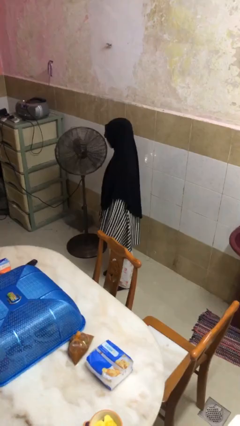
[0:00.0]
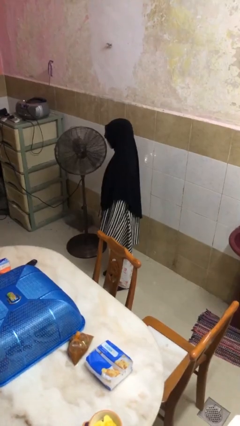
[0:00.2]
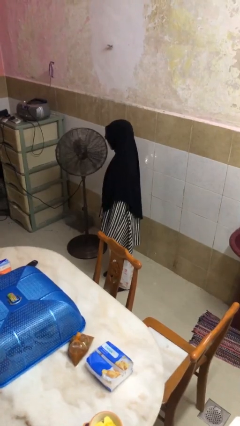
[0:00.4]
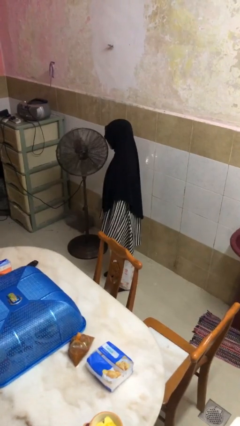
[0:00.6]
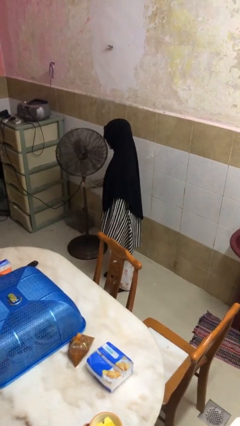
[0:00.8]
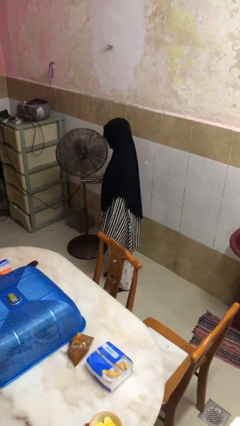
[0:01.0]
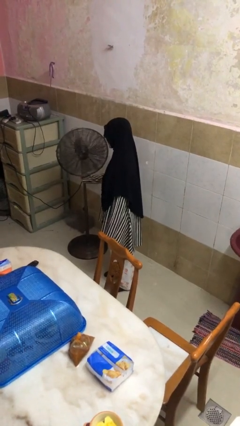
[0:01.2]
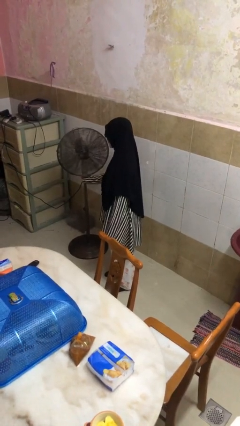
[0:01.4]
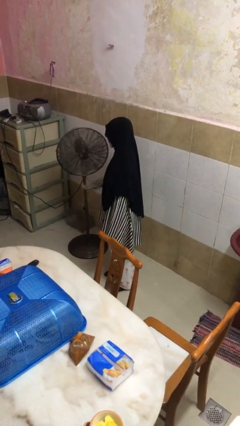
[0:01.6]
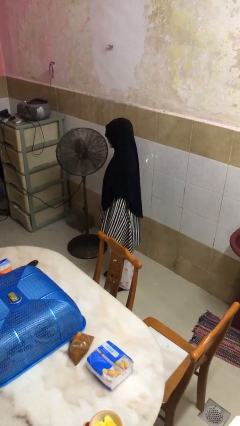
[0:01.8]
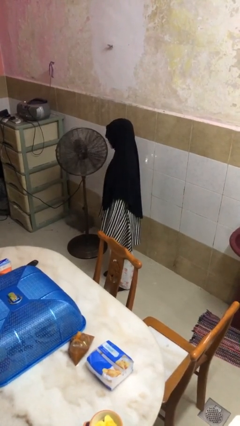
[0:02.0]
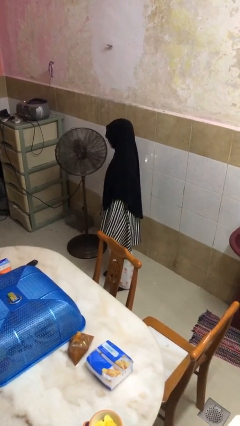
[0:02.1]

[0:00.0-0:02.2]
person turns on fan

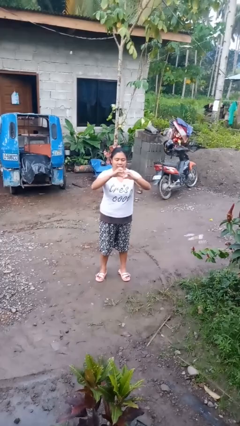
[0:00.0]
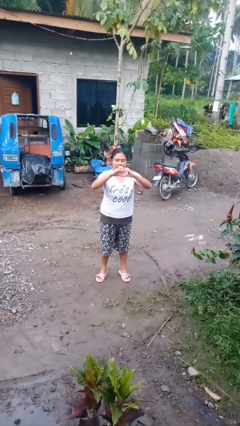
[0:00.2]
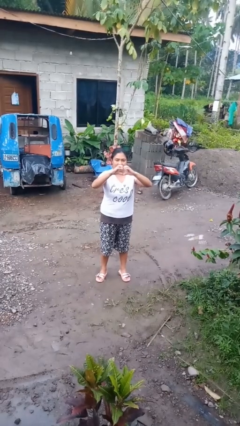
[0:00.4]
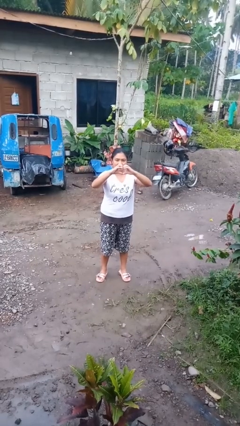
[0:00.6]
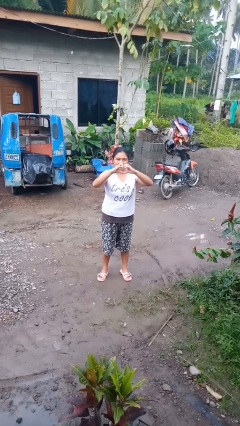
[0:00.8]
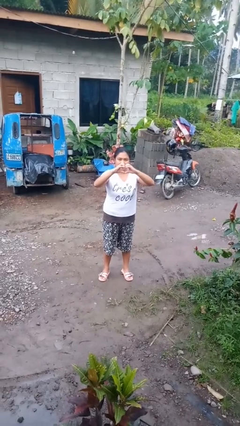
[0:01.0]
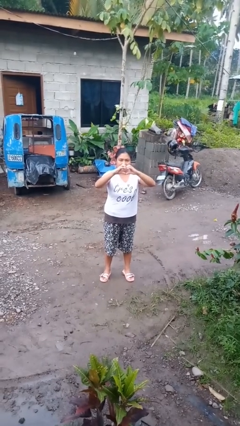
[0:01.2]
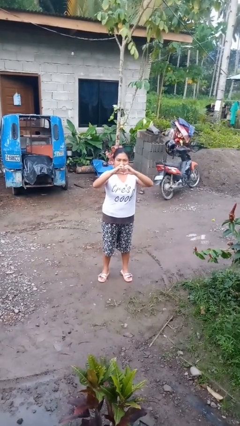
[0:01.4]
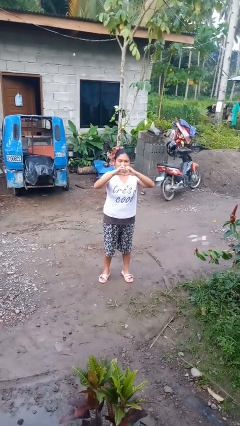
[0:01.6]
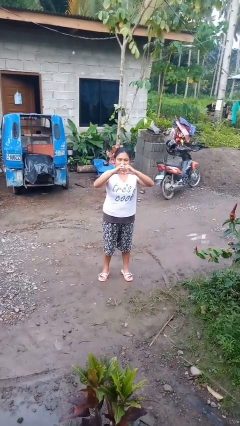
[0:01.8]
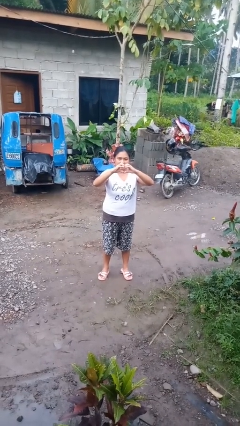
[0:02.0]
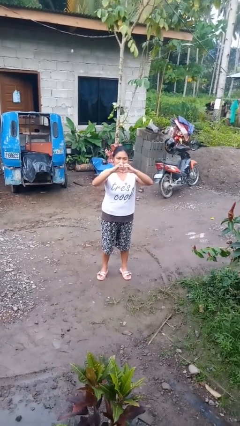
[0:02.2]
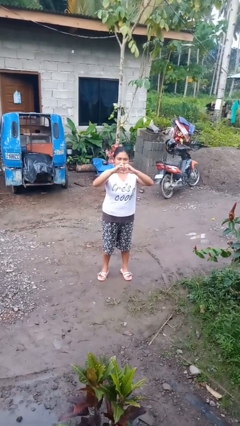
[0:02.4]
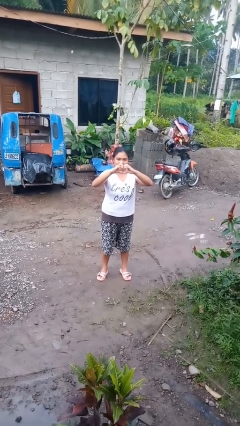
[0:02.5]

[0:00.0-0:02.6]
person gestures heart

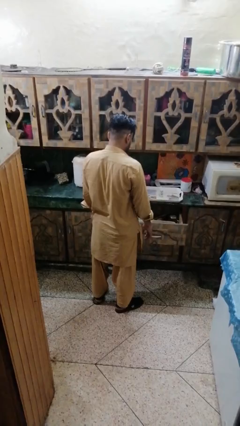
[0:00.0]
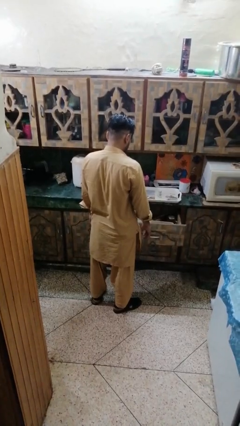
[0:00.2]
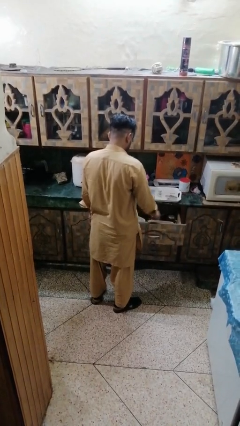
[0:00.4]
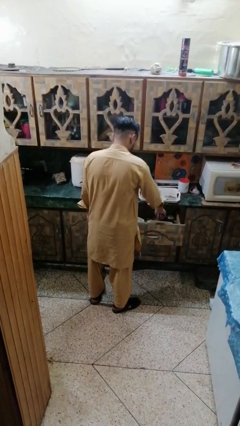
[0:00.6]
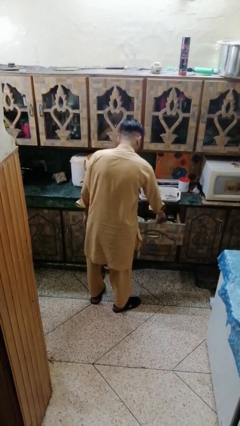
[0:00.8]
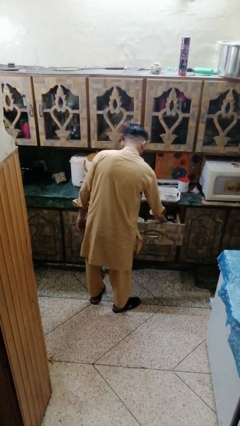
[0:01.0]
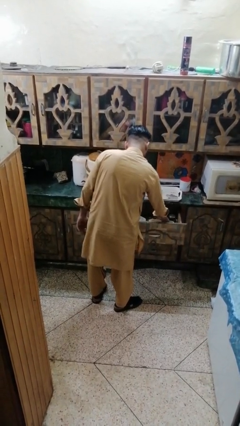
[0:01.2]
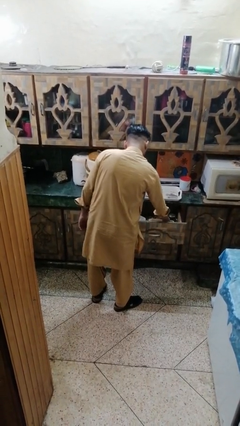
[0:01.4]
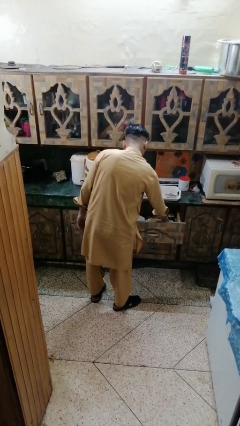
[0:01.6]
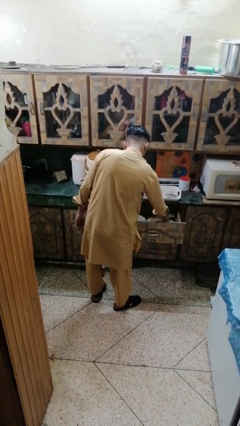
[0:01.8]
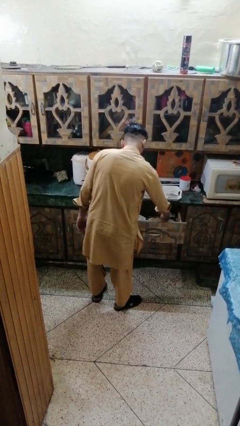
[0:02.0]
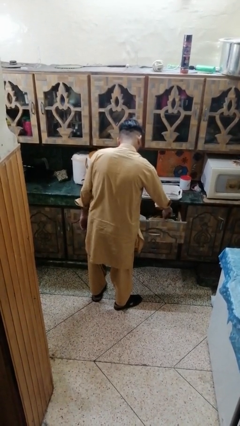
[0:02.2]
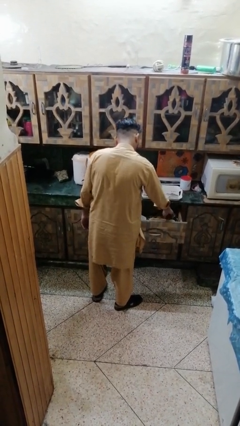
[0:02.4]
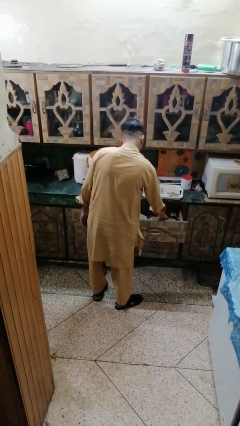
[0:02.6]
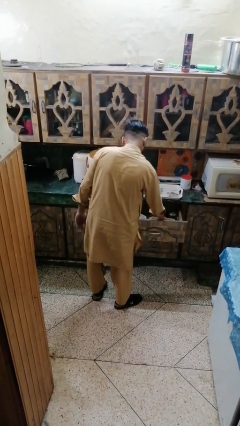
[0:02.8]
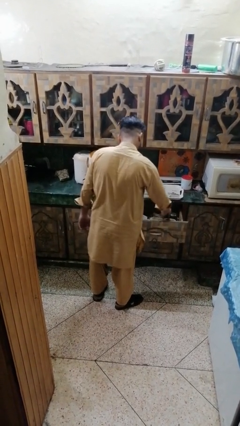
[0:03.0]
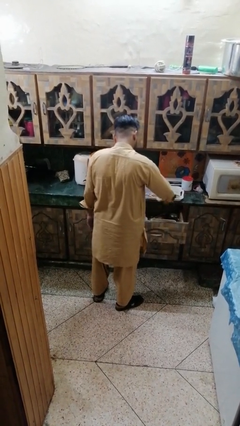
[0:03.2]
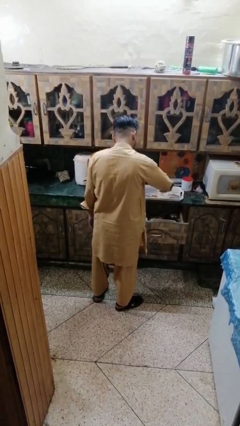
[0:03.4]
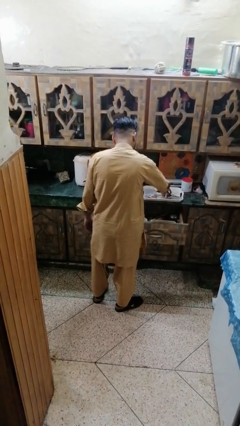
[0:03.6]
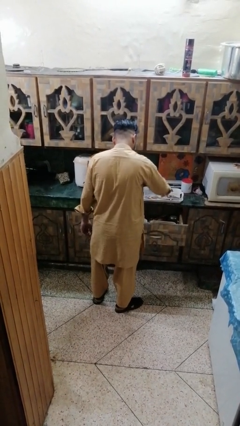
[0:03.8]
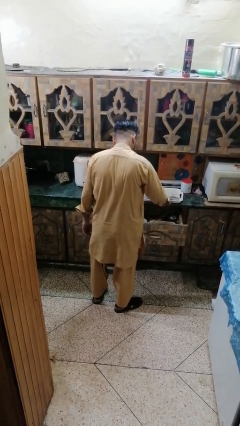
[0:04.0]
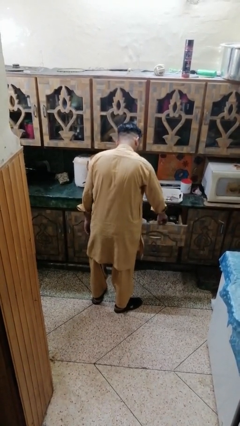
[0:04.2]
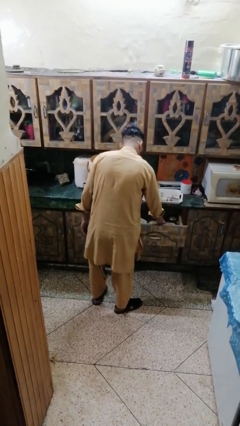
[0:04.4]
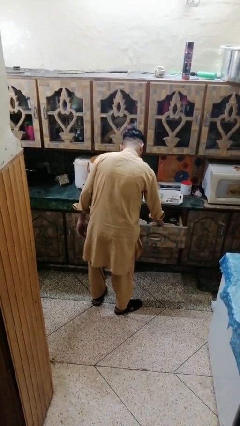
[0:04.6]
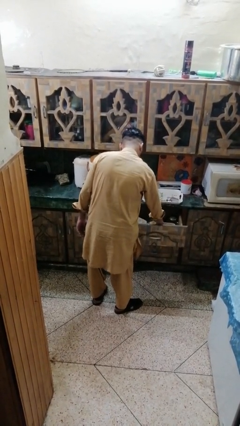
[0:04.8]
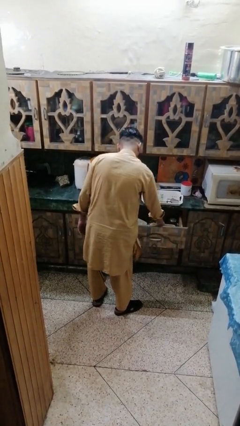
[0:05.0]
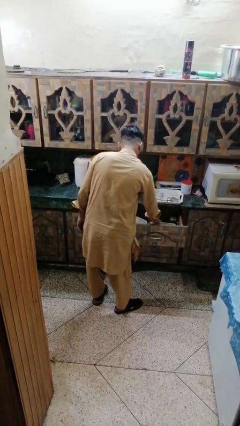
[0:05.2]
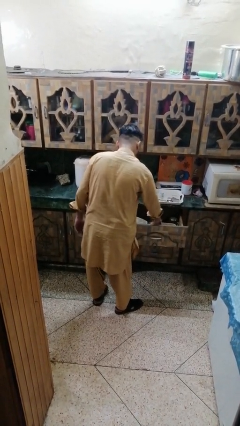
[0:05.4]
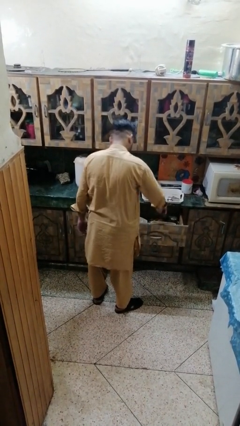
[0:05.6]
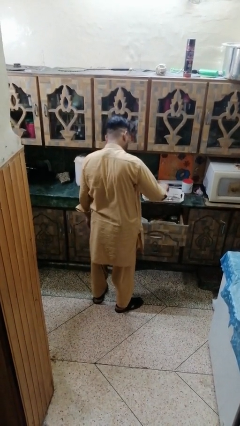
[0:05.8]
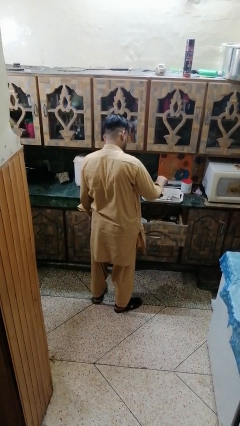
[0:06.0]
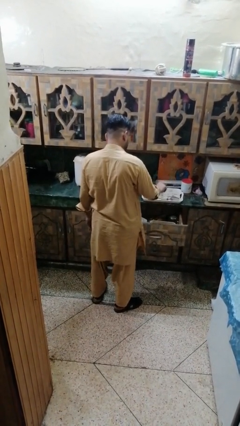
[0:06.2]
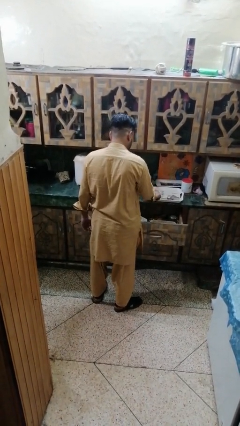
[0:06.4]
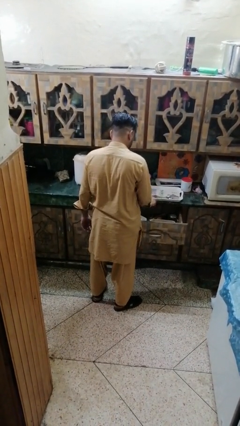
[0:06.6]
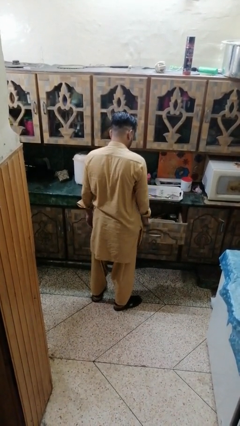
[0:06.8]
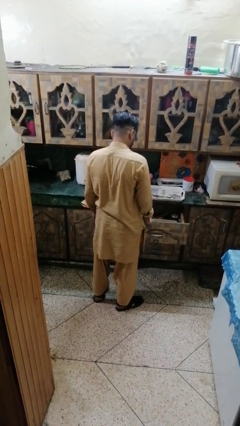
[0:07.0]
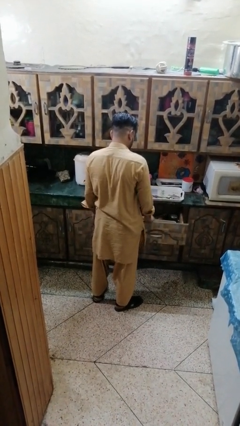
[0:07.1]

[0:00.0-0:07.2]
person takes object from kitchen drawer

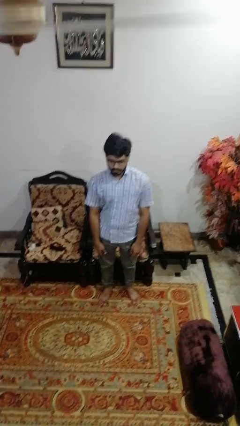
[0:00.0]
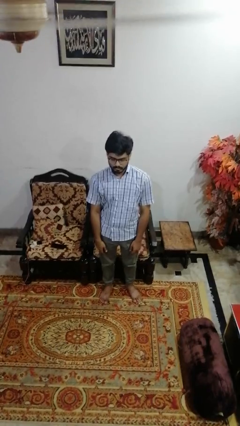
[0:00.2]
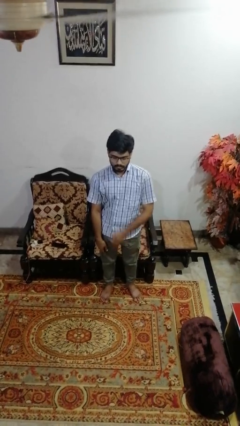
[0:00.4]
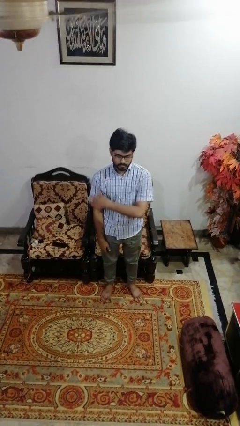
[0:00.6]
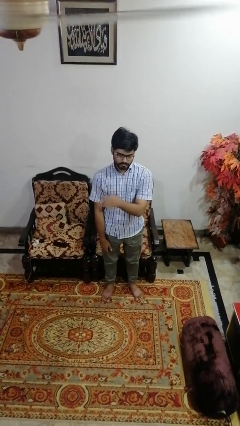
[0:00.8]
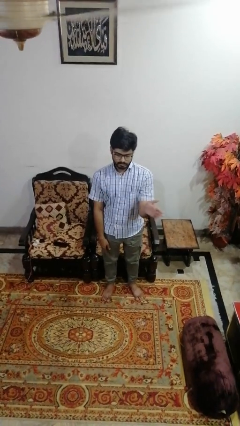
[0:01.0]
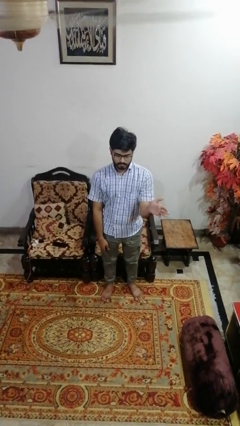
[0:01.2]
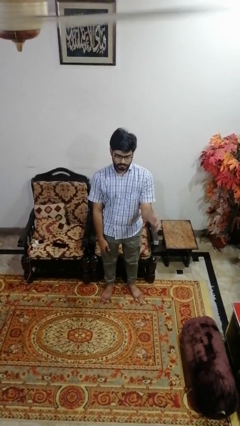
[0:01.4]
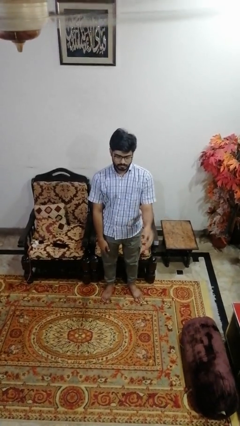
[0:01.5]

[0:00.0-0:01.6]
person gestures swipe left

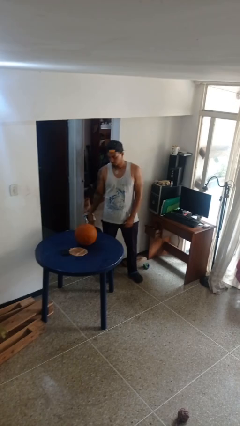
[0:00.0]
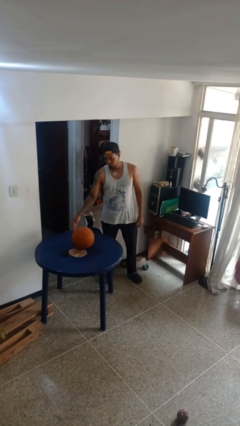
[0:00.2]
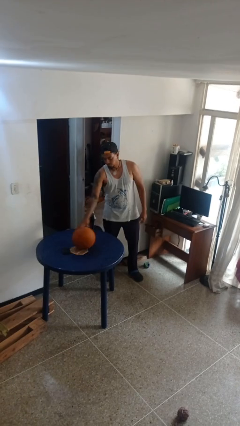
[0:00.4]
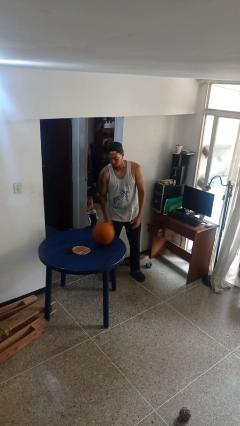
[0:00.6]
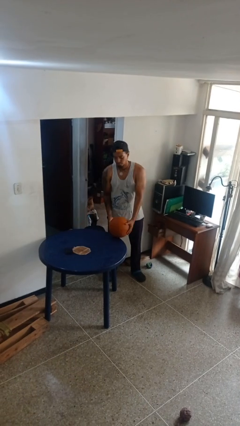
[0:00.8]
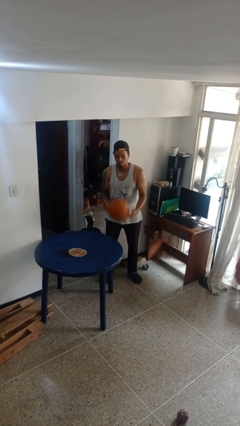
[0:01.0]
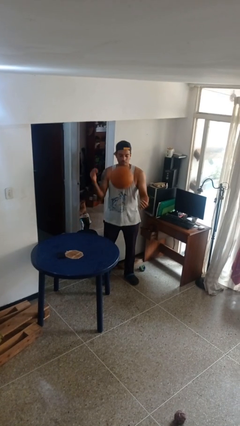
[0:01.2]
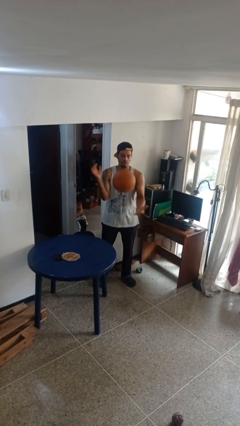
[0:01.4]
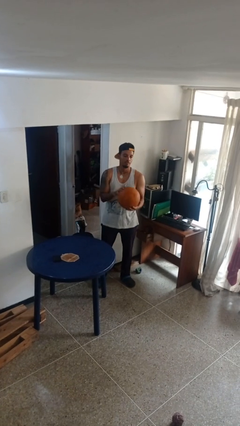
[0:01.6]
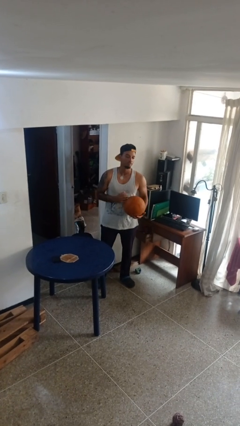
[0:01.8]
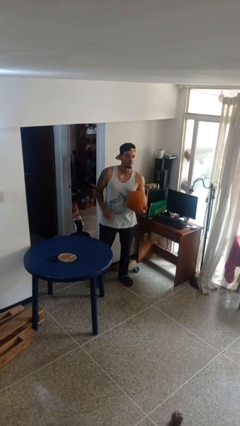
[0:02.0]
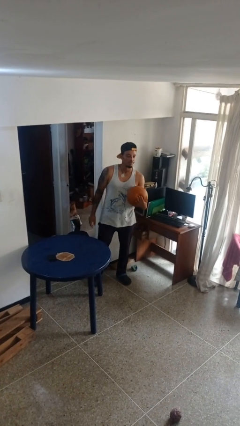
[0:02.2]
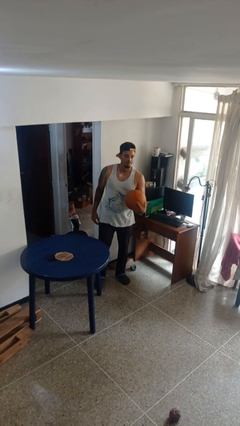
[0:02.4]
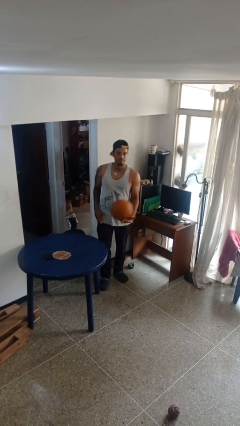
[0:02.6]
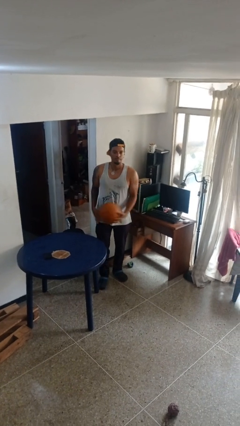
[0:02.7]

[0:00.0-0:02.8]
person picks up object from table

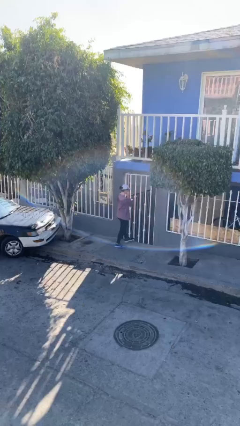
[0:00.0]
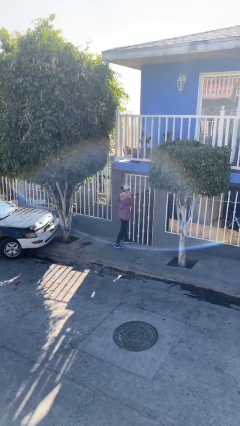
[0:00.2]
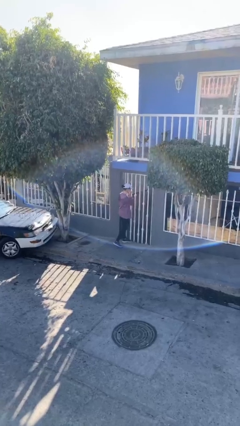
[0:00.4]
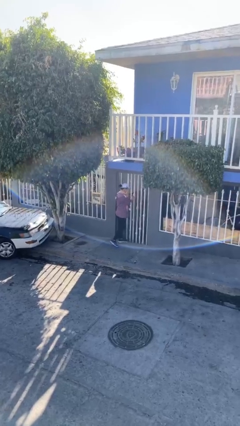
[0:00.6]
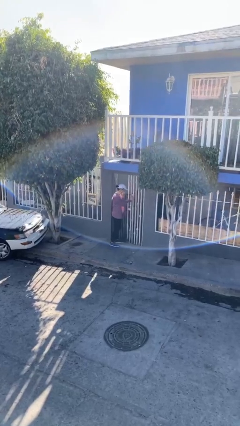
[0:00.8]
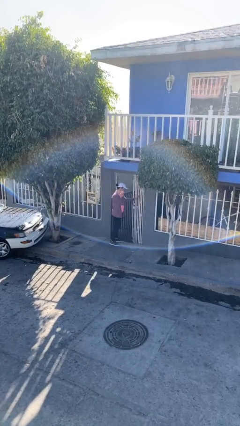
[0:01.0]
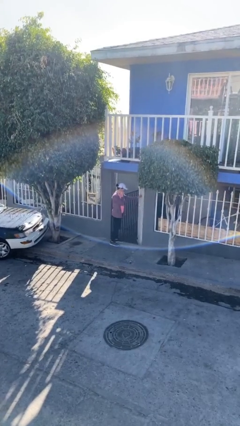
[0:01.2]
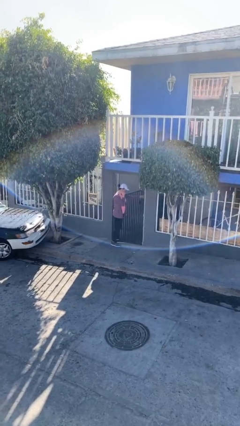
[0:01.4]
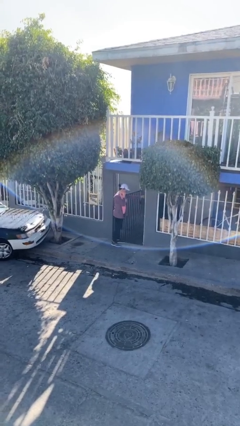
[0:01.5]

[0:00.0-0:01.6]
person opens facility door
